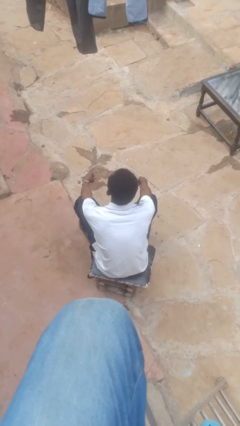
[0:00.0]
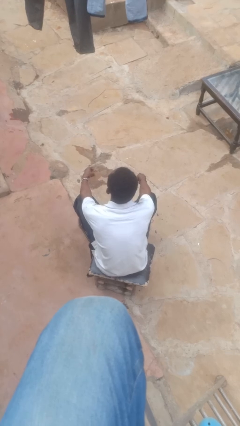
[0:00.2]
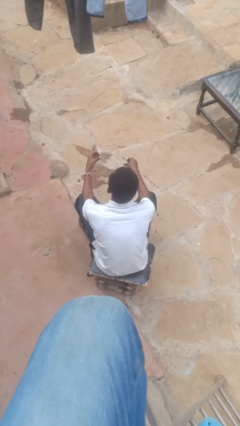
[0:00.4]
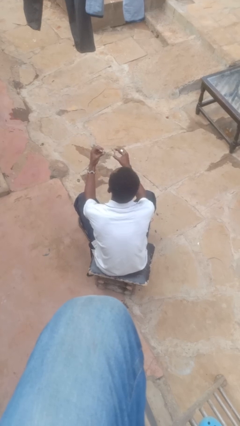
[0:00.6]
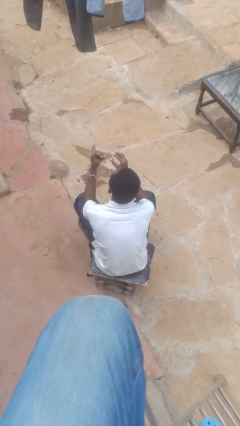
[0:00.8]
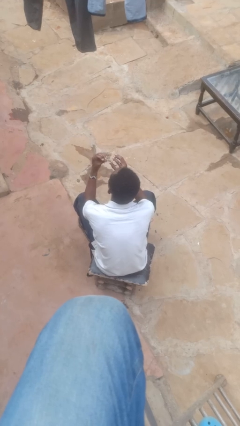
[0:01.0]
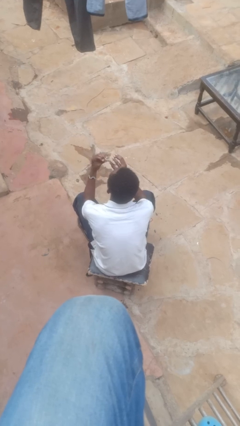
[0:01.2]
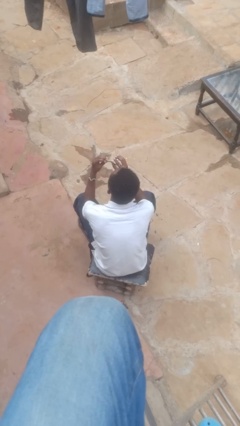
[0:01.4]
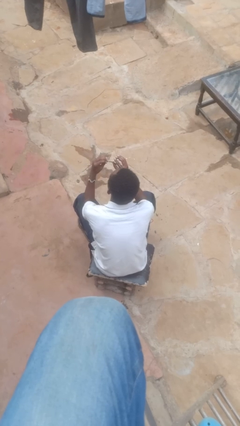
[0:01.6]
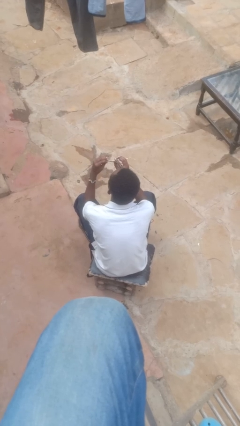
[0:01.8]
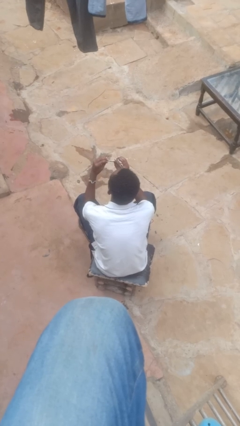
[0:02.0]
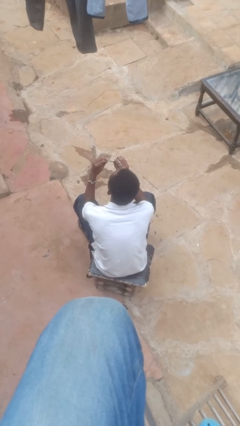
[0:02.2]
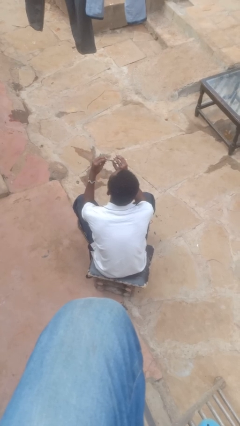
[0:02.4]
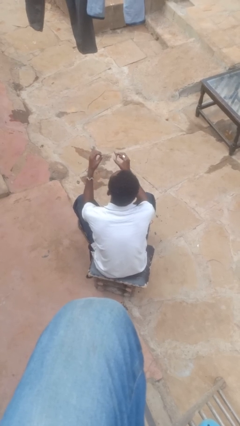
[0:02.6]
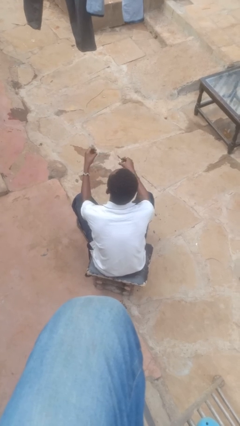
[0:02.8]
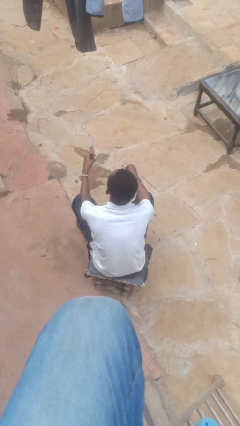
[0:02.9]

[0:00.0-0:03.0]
person clips fingernails

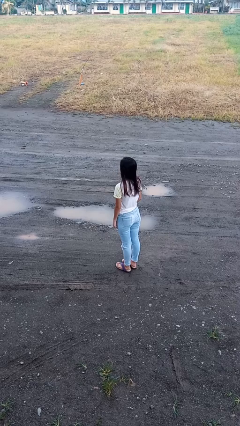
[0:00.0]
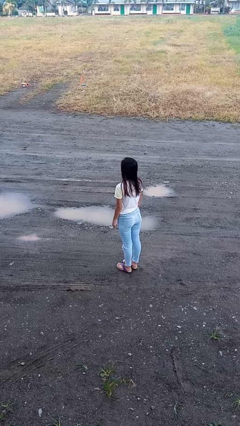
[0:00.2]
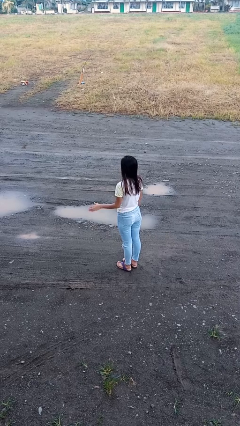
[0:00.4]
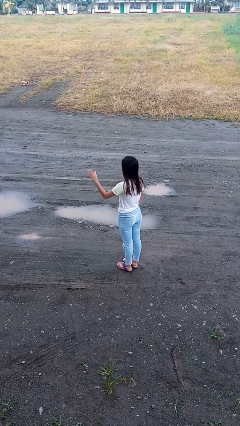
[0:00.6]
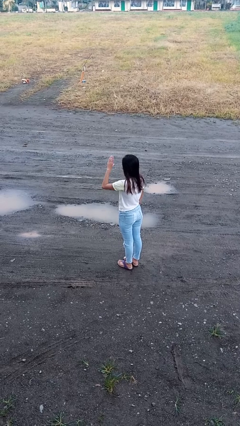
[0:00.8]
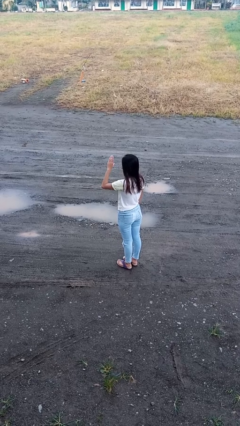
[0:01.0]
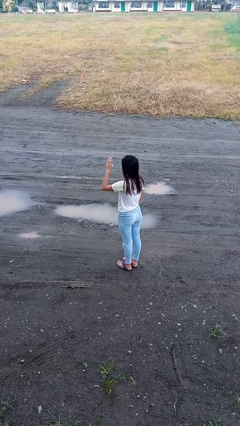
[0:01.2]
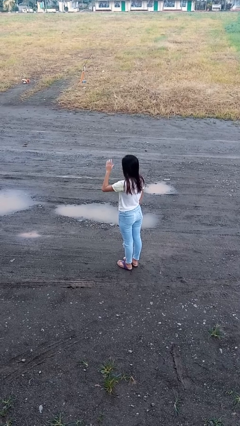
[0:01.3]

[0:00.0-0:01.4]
person gestures swipe right

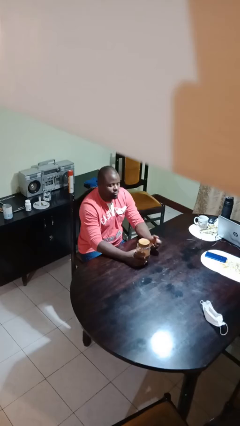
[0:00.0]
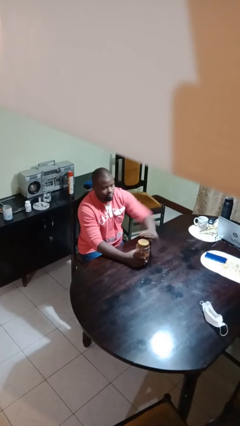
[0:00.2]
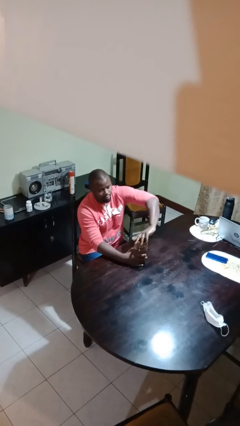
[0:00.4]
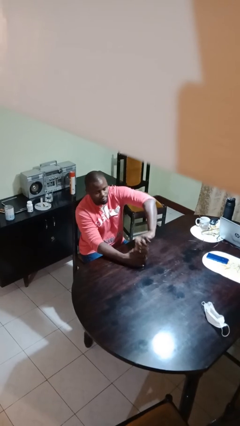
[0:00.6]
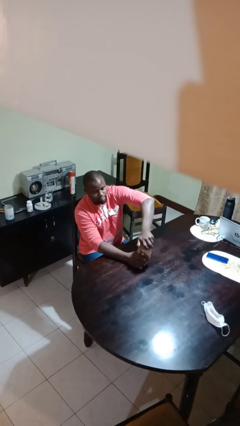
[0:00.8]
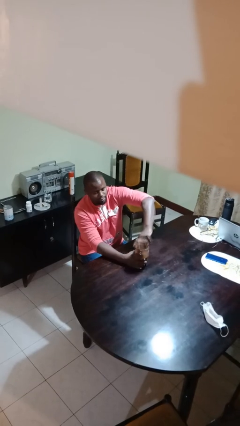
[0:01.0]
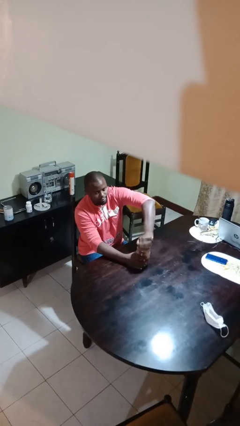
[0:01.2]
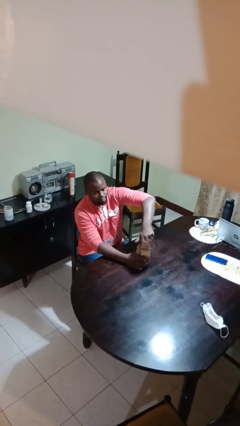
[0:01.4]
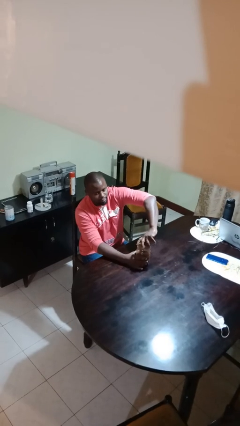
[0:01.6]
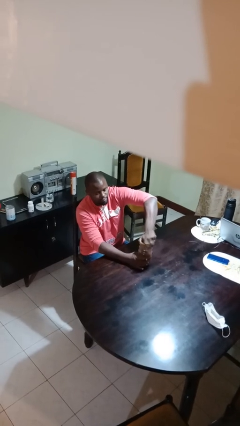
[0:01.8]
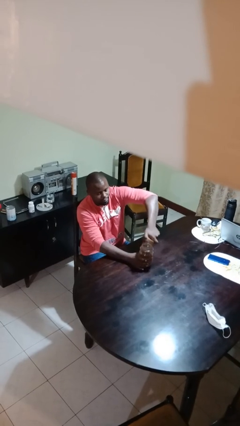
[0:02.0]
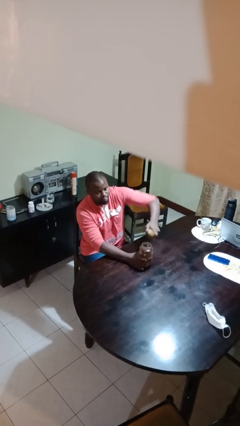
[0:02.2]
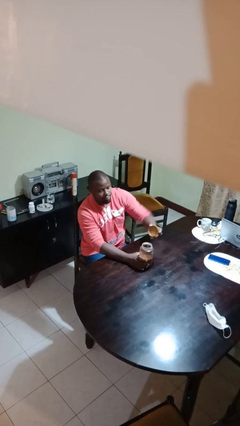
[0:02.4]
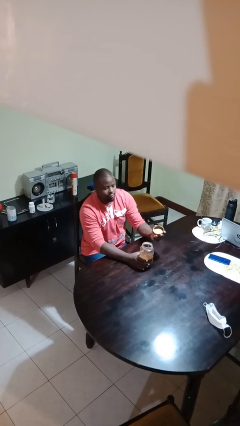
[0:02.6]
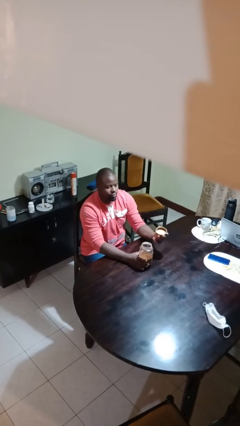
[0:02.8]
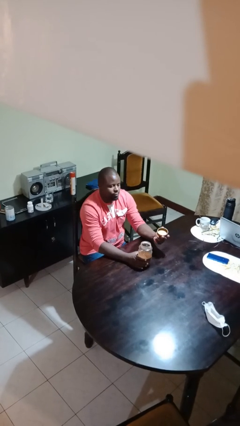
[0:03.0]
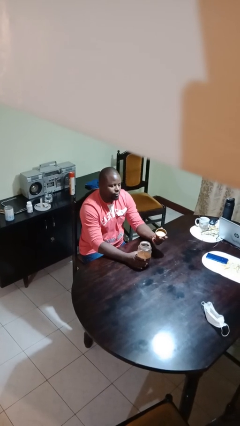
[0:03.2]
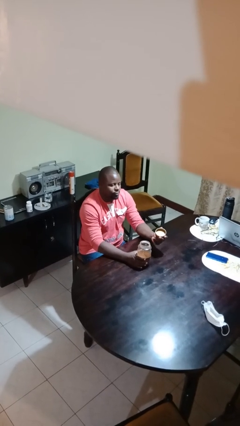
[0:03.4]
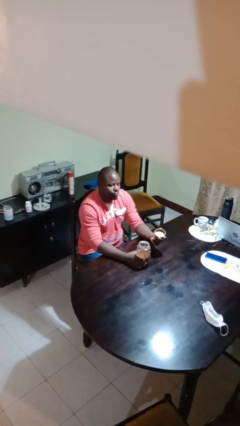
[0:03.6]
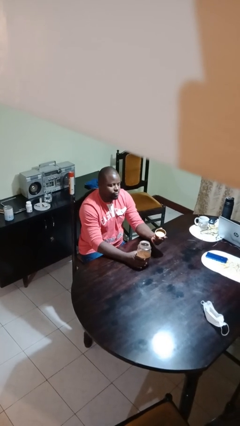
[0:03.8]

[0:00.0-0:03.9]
person opens jar

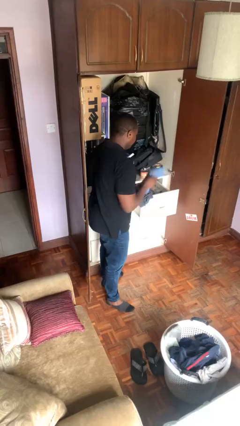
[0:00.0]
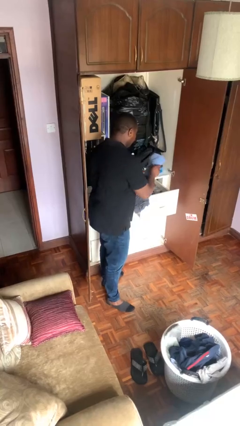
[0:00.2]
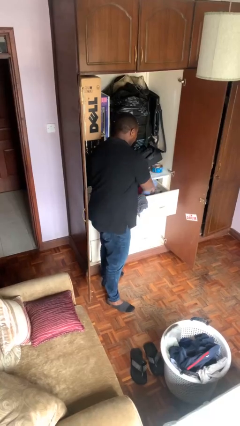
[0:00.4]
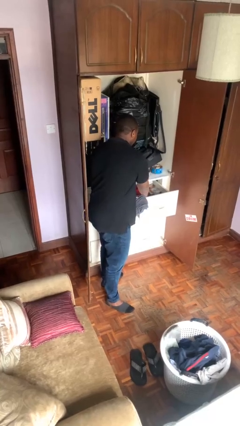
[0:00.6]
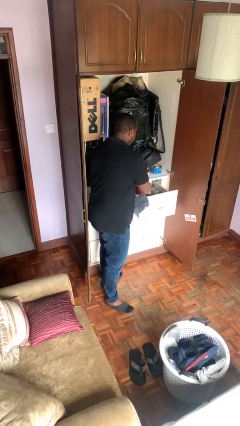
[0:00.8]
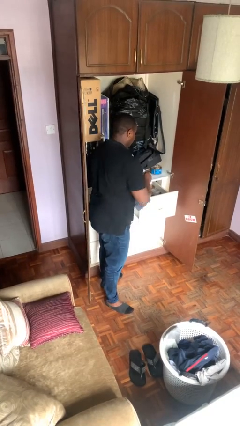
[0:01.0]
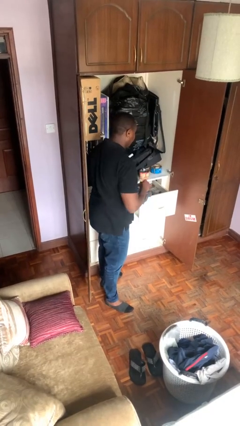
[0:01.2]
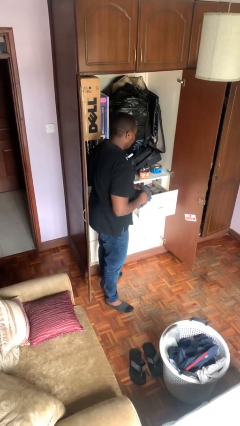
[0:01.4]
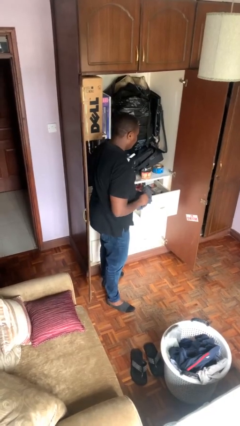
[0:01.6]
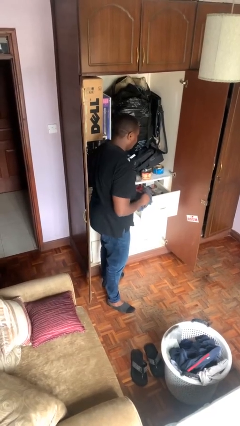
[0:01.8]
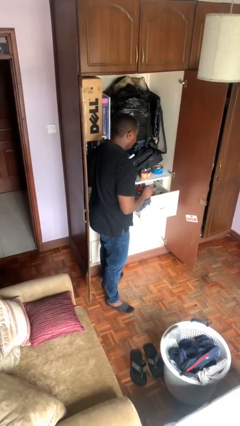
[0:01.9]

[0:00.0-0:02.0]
person puts clothes into dresser

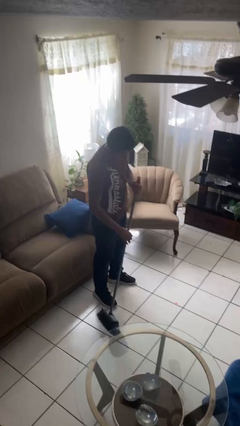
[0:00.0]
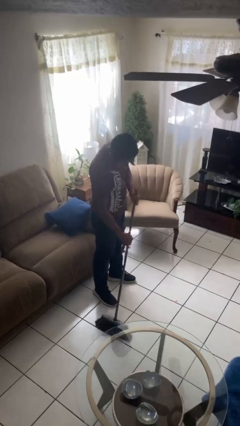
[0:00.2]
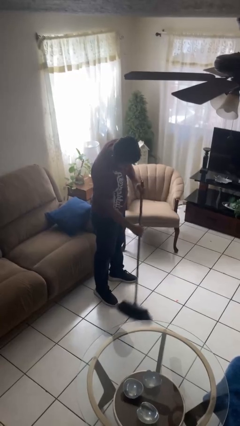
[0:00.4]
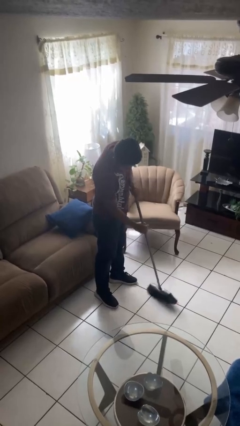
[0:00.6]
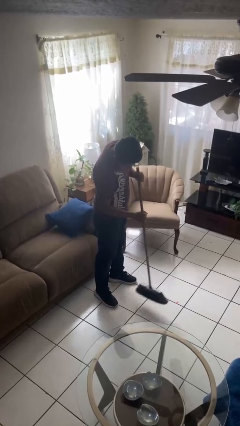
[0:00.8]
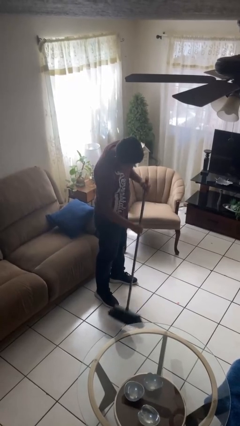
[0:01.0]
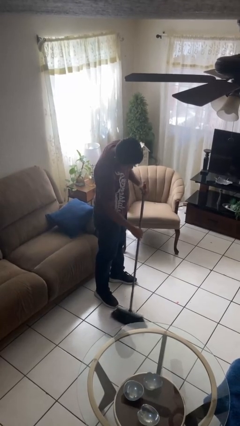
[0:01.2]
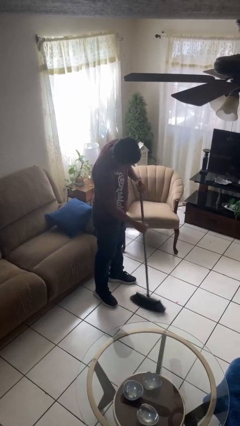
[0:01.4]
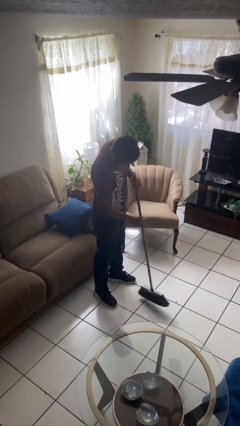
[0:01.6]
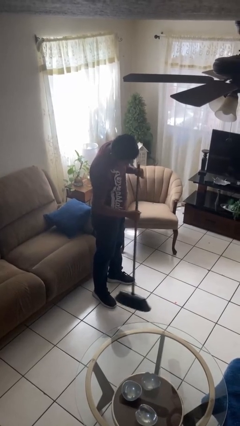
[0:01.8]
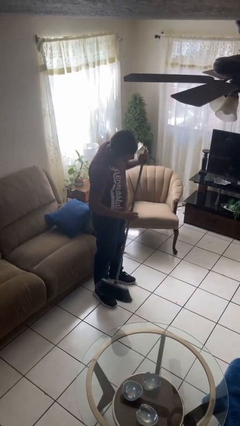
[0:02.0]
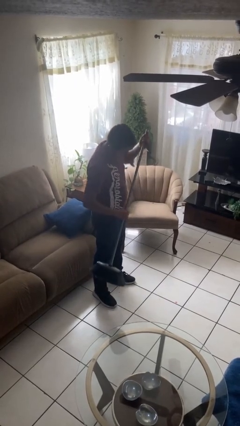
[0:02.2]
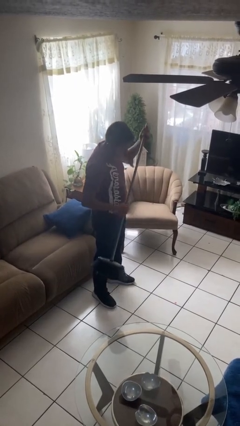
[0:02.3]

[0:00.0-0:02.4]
person sweeps floor

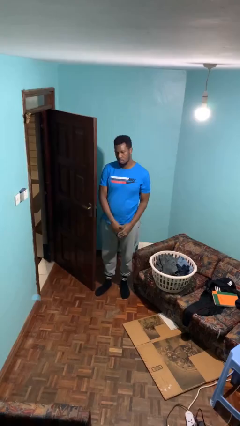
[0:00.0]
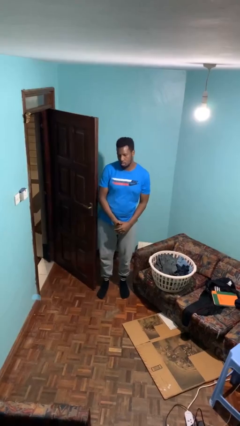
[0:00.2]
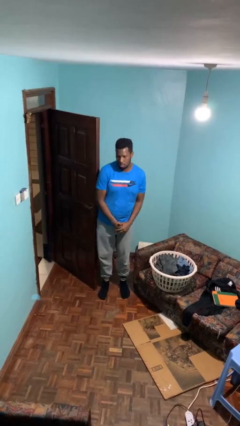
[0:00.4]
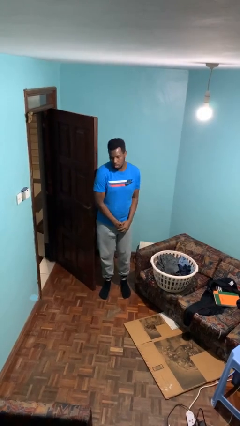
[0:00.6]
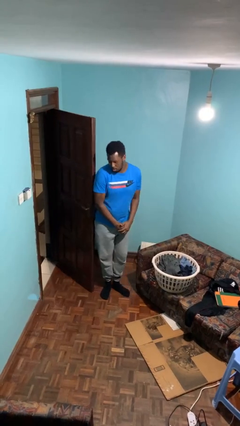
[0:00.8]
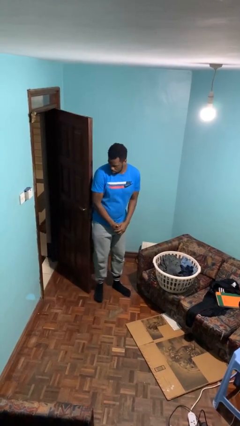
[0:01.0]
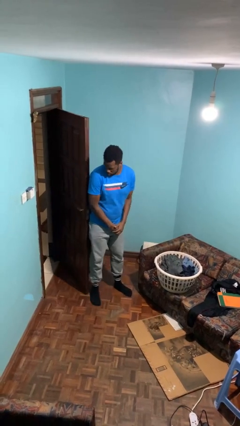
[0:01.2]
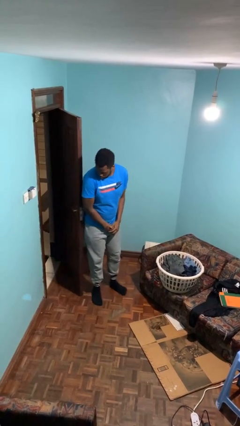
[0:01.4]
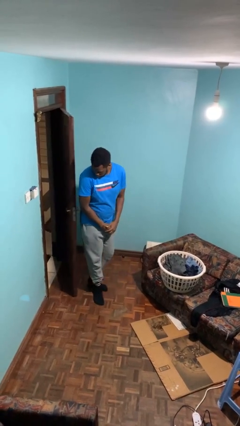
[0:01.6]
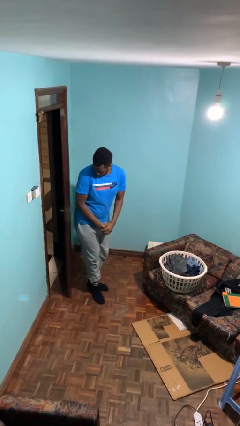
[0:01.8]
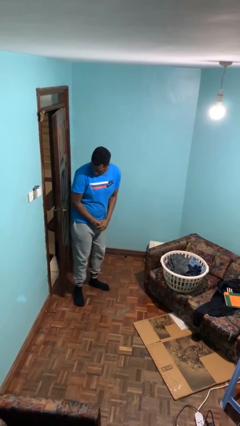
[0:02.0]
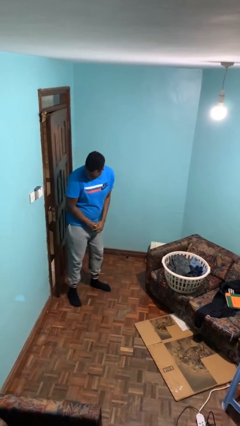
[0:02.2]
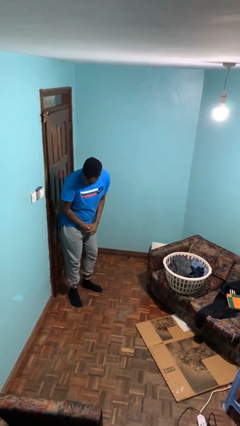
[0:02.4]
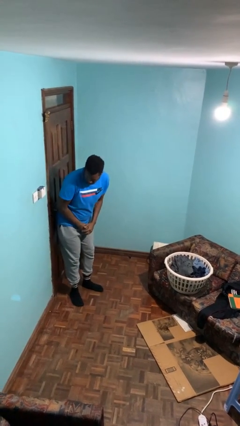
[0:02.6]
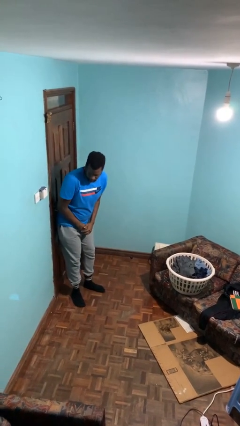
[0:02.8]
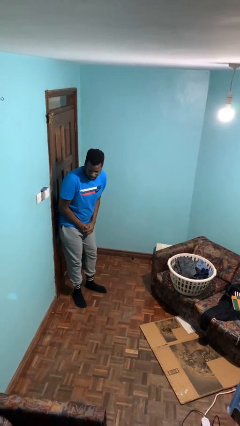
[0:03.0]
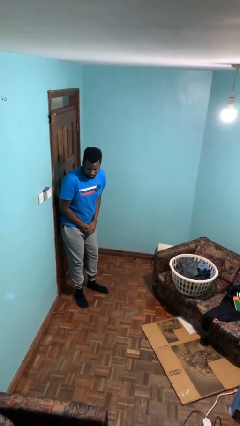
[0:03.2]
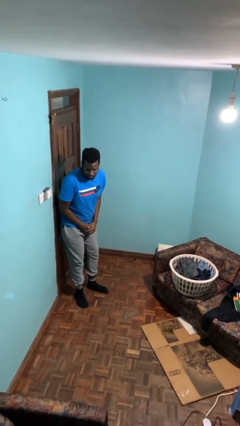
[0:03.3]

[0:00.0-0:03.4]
person closes door with hip

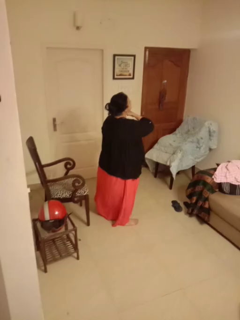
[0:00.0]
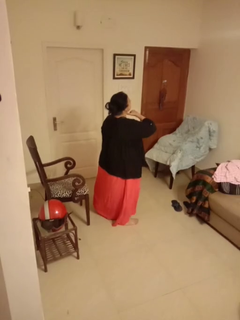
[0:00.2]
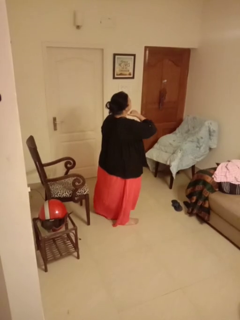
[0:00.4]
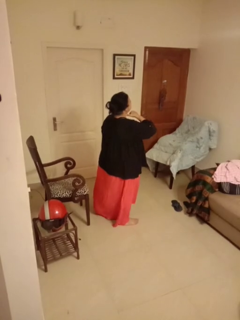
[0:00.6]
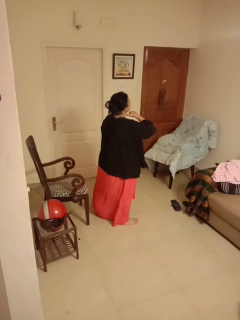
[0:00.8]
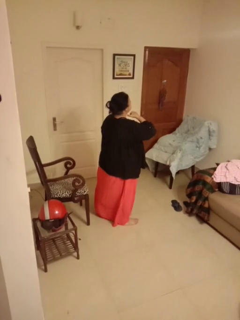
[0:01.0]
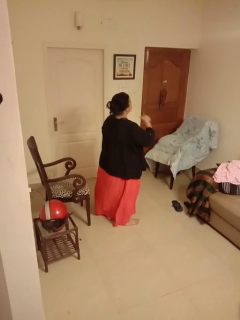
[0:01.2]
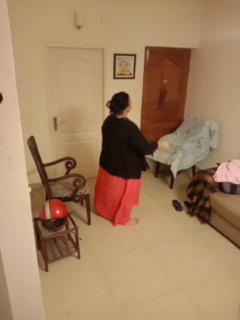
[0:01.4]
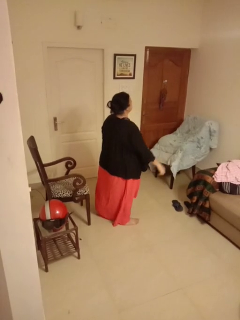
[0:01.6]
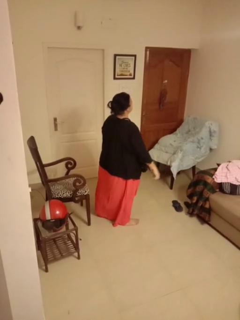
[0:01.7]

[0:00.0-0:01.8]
person gestures cut
